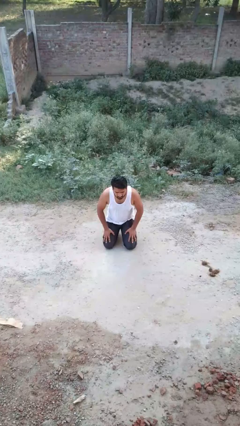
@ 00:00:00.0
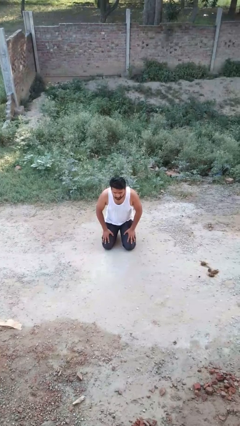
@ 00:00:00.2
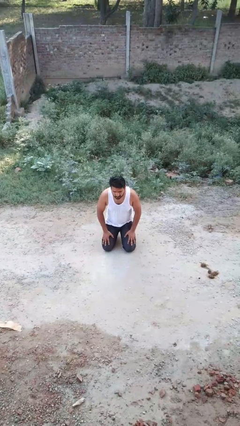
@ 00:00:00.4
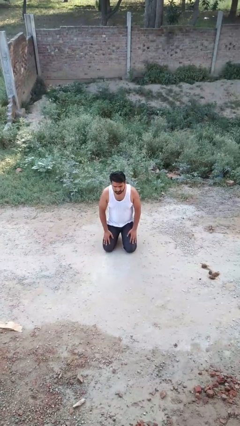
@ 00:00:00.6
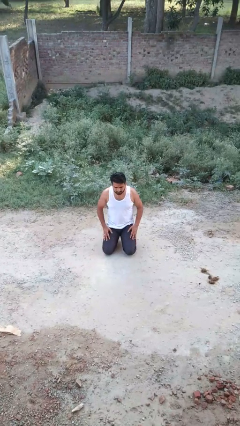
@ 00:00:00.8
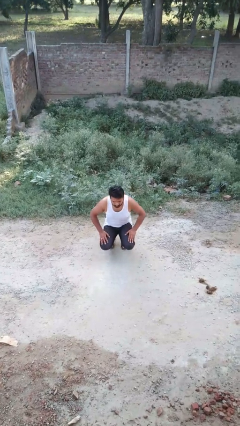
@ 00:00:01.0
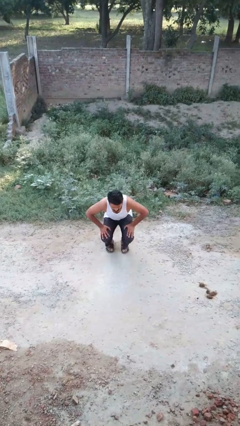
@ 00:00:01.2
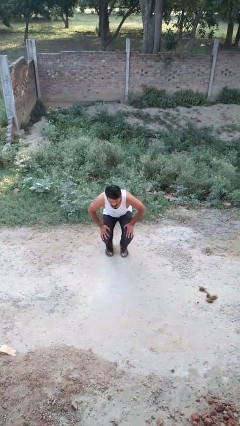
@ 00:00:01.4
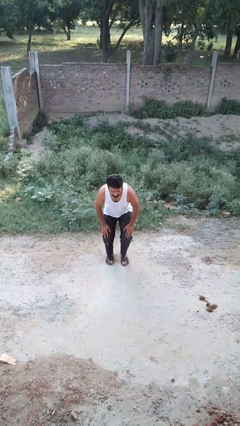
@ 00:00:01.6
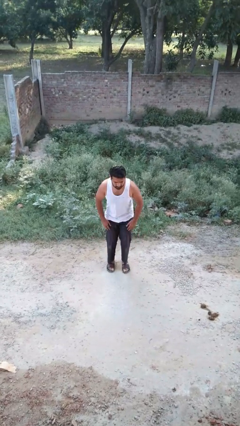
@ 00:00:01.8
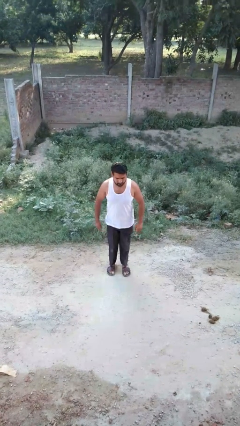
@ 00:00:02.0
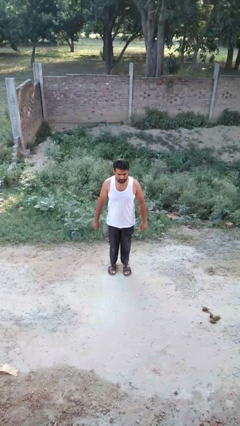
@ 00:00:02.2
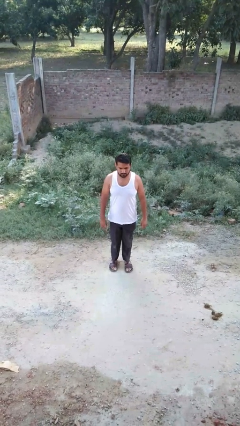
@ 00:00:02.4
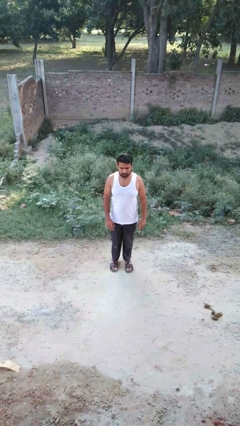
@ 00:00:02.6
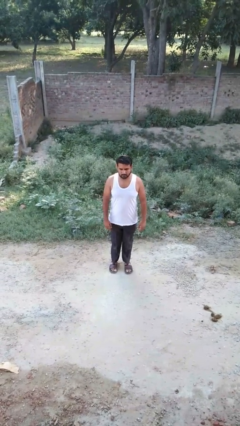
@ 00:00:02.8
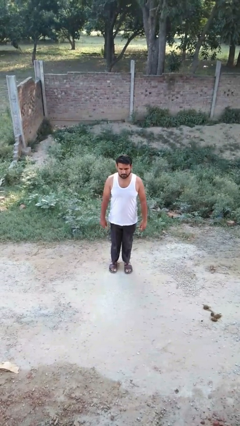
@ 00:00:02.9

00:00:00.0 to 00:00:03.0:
person stands up from floor

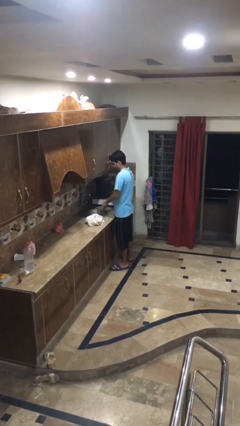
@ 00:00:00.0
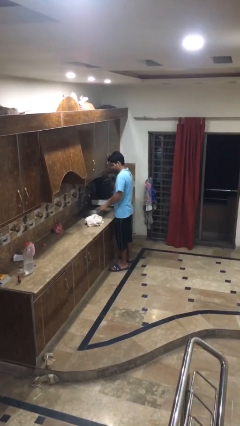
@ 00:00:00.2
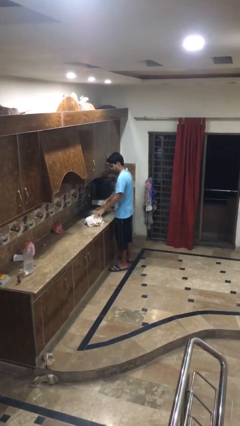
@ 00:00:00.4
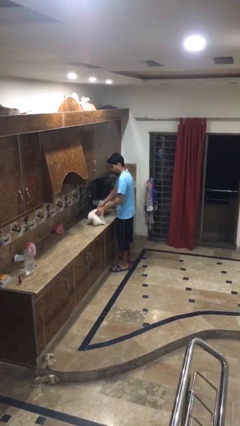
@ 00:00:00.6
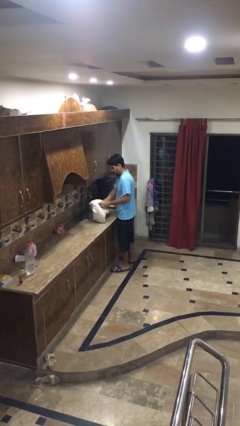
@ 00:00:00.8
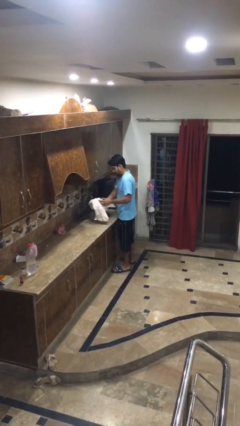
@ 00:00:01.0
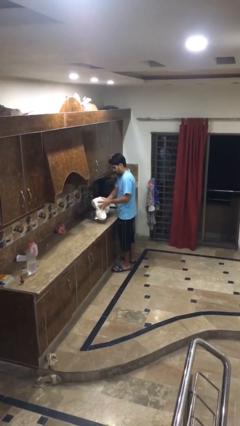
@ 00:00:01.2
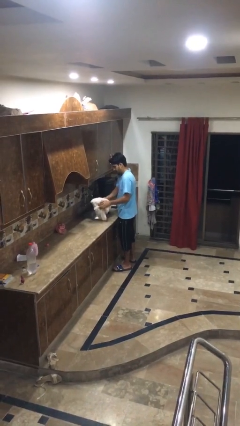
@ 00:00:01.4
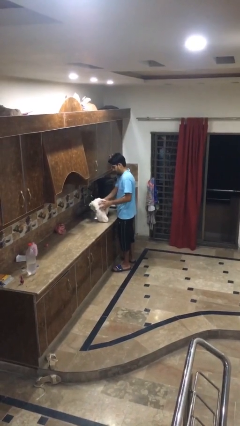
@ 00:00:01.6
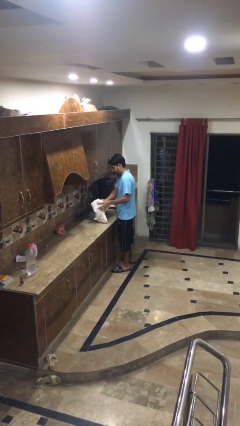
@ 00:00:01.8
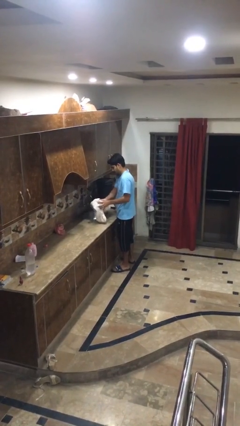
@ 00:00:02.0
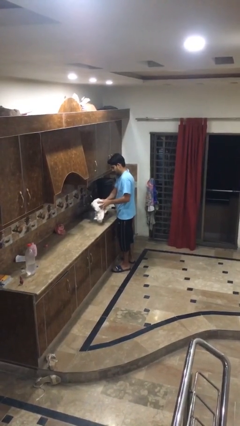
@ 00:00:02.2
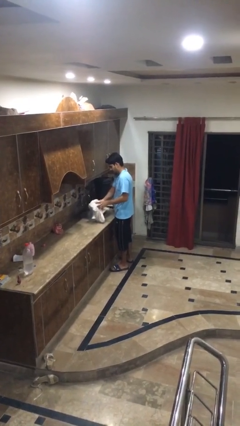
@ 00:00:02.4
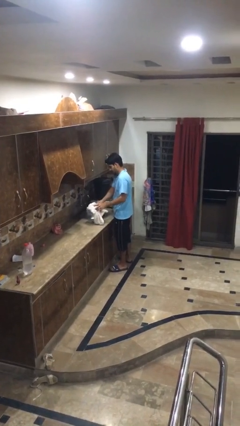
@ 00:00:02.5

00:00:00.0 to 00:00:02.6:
person dries hands with towel

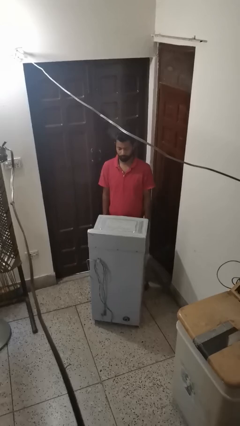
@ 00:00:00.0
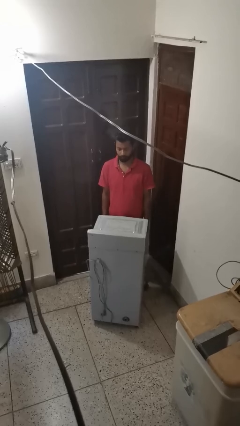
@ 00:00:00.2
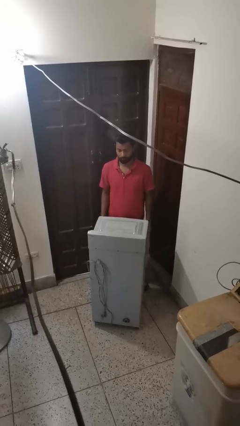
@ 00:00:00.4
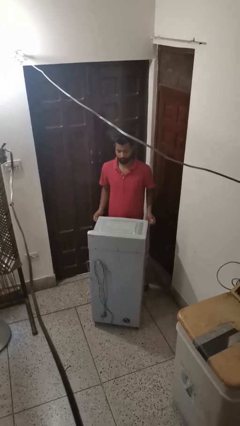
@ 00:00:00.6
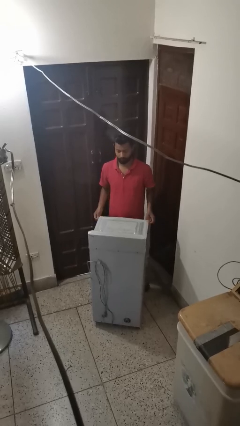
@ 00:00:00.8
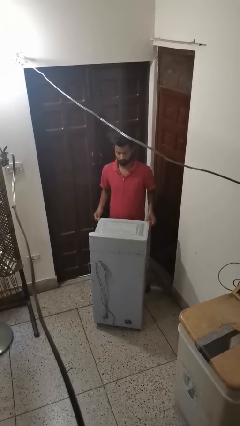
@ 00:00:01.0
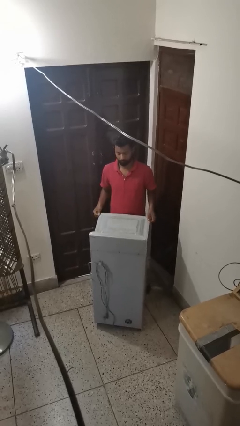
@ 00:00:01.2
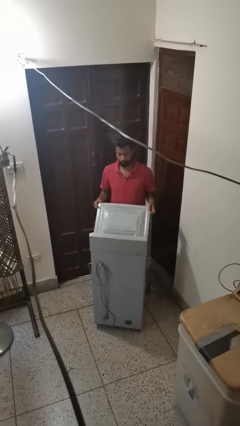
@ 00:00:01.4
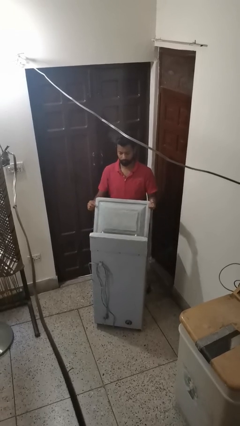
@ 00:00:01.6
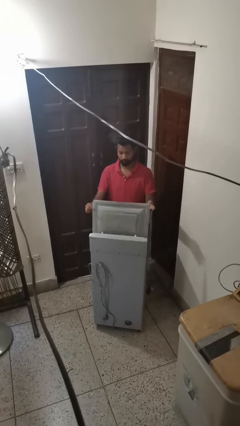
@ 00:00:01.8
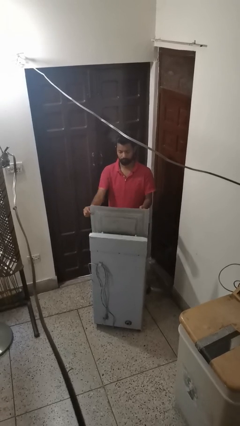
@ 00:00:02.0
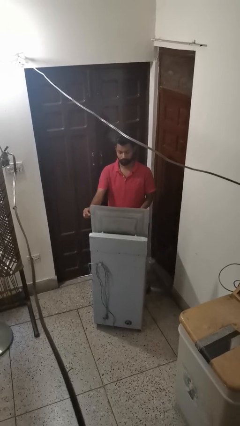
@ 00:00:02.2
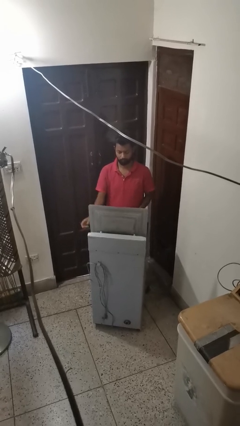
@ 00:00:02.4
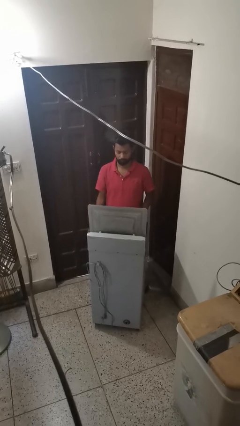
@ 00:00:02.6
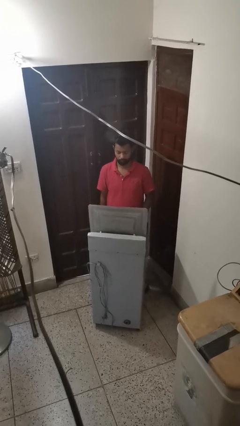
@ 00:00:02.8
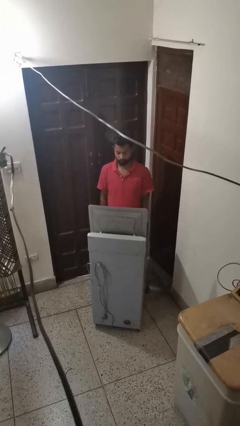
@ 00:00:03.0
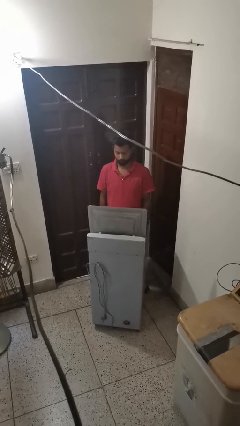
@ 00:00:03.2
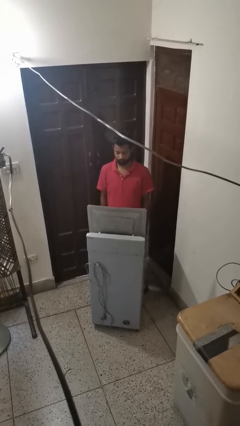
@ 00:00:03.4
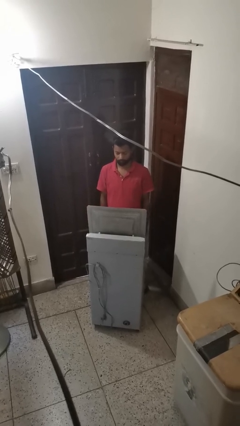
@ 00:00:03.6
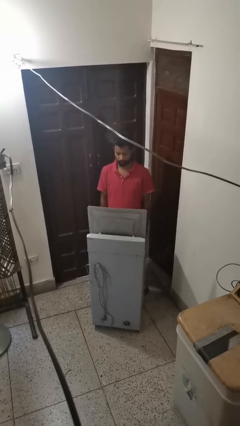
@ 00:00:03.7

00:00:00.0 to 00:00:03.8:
person opens clothes washer

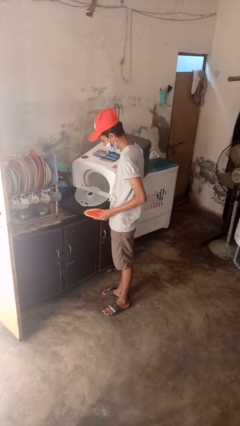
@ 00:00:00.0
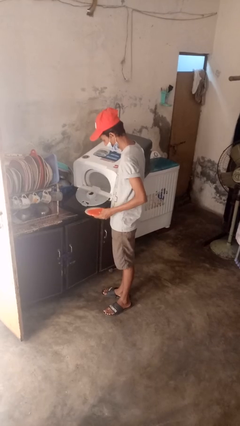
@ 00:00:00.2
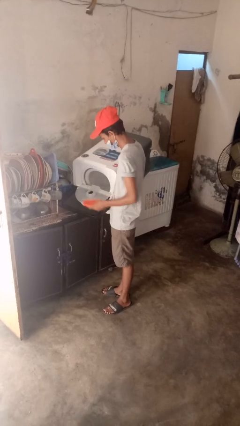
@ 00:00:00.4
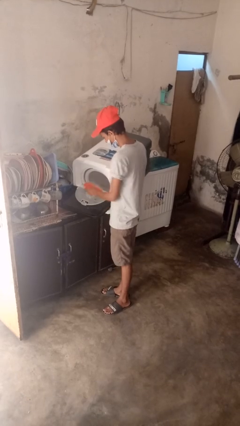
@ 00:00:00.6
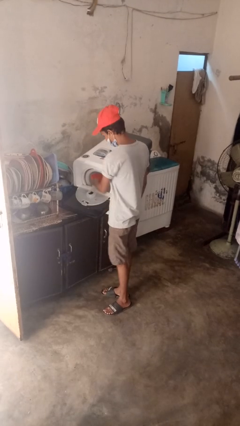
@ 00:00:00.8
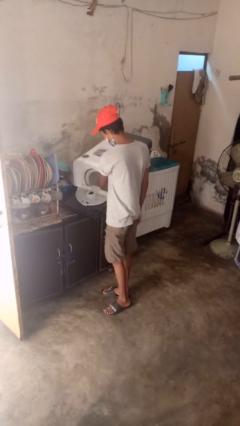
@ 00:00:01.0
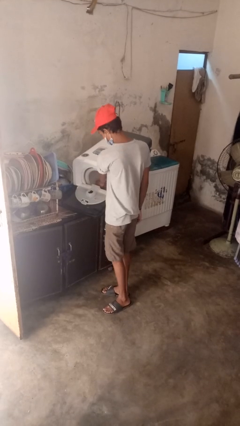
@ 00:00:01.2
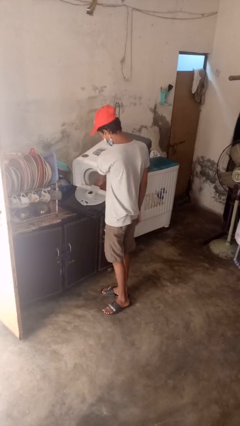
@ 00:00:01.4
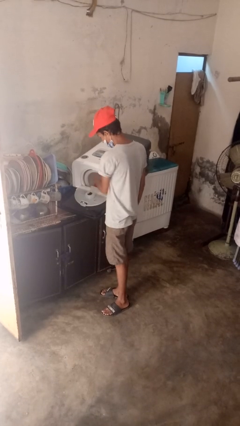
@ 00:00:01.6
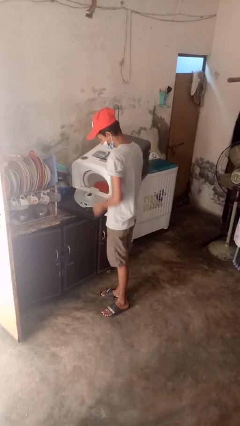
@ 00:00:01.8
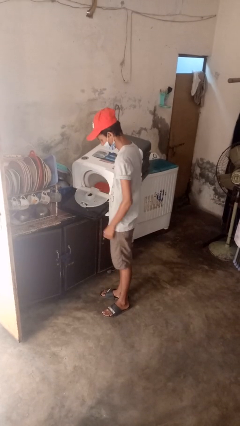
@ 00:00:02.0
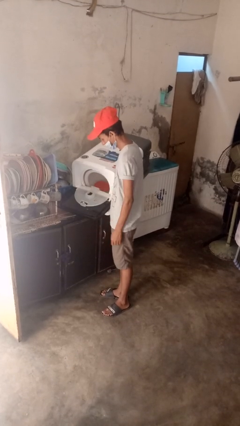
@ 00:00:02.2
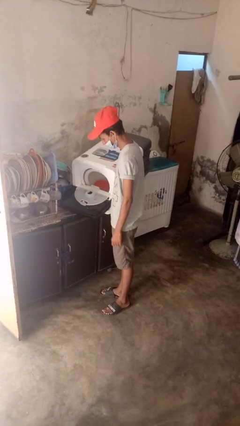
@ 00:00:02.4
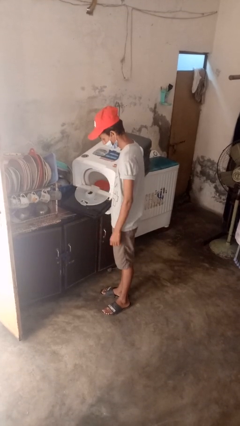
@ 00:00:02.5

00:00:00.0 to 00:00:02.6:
person loads dishwasher

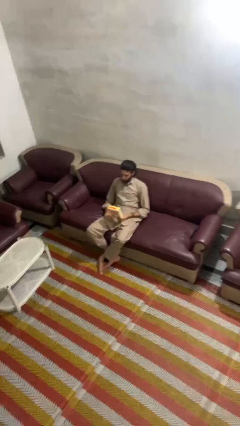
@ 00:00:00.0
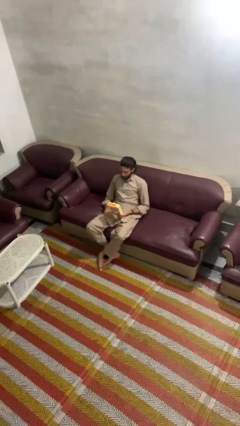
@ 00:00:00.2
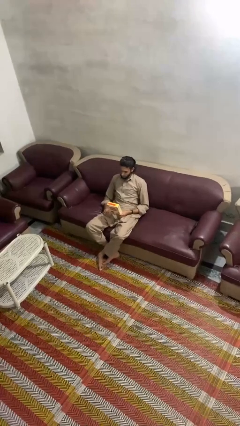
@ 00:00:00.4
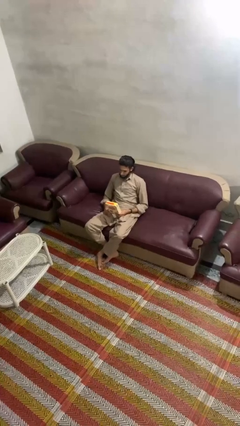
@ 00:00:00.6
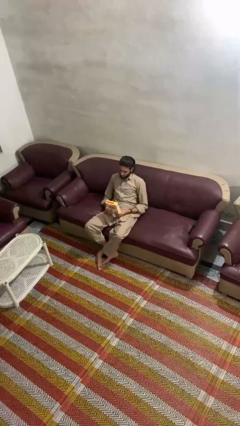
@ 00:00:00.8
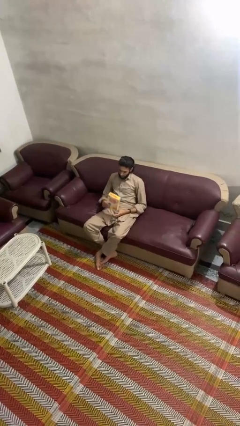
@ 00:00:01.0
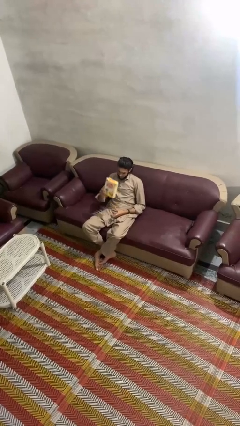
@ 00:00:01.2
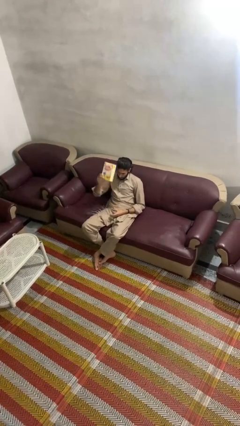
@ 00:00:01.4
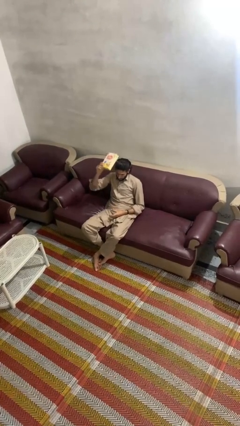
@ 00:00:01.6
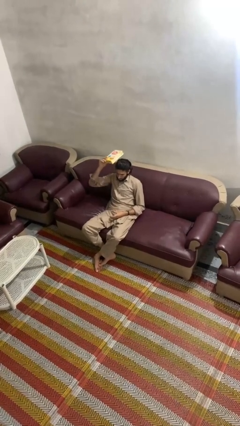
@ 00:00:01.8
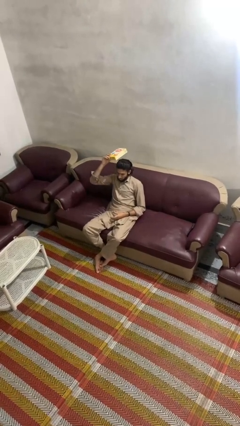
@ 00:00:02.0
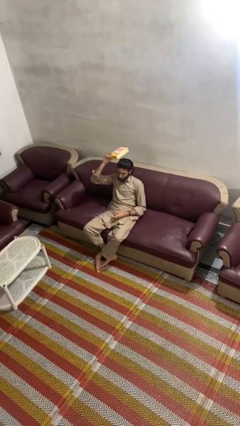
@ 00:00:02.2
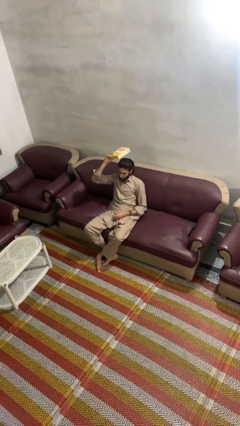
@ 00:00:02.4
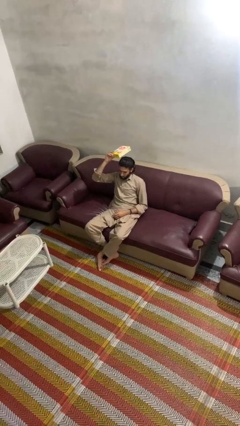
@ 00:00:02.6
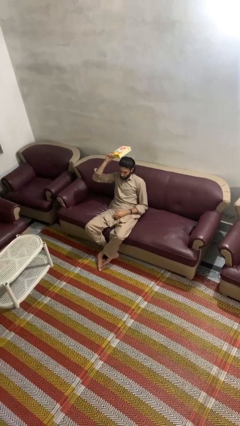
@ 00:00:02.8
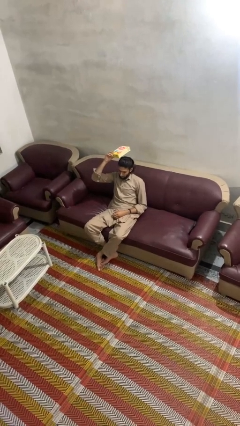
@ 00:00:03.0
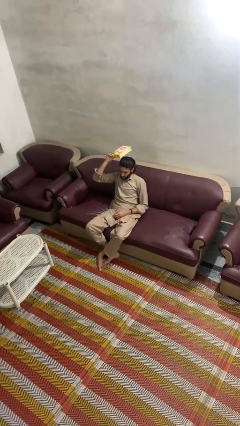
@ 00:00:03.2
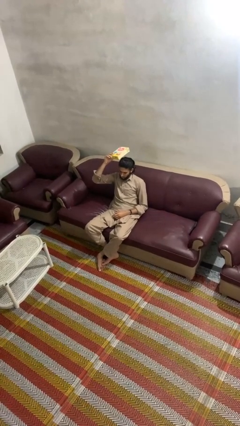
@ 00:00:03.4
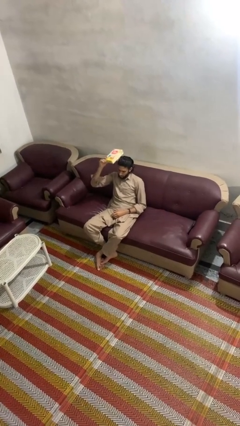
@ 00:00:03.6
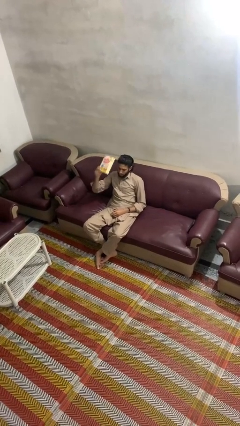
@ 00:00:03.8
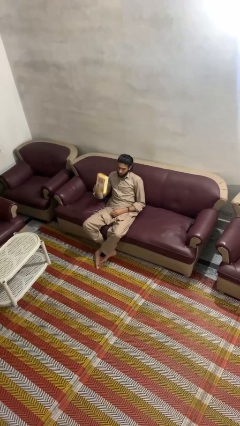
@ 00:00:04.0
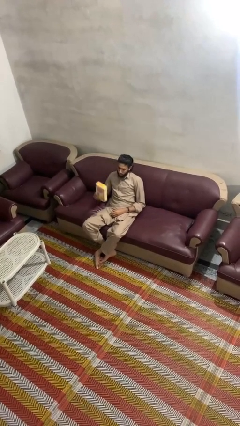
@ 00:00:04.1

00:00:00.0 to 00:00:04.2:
person holds object above head

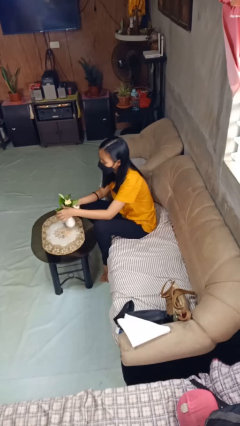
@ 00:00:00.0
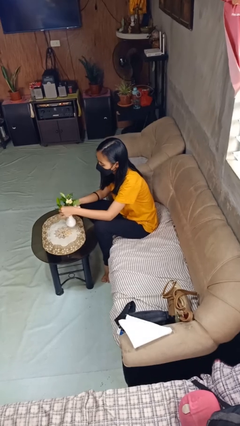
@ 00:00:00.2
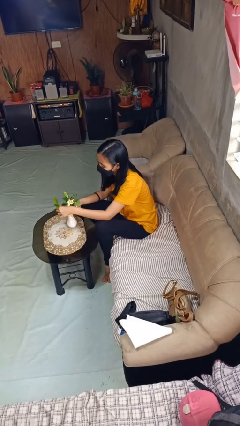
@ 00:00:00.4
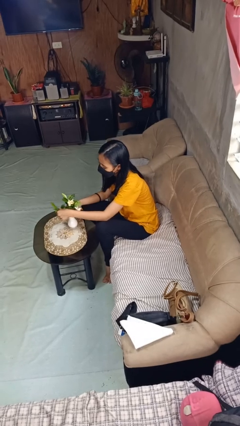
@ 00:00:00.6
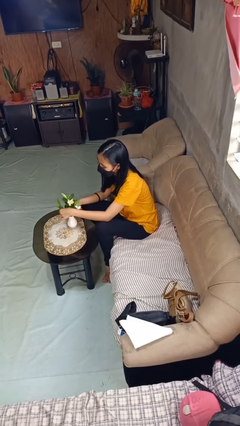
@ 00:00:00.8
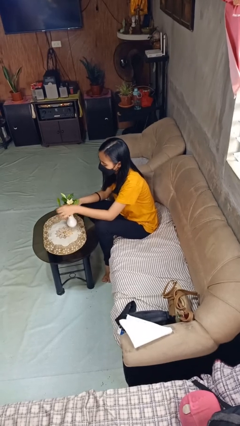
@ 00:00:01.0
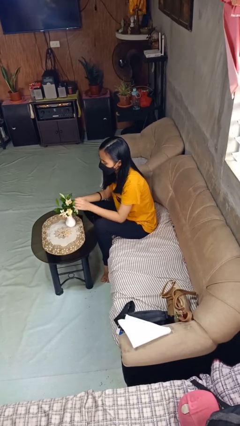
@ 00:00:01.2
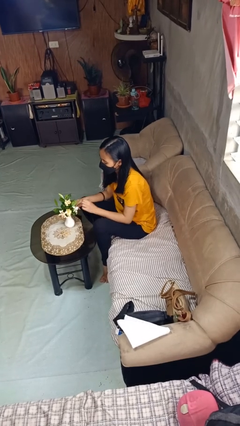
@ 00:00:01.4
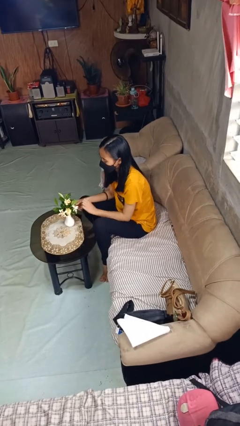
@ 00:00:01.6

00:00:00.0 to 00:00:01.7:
person covers face with hands
